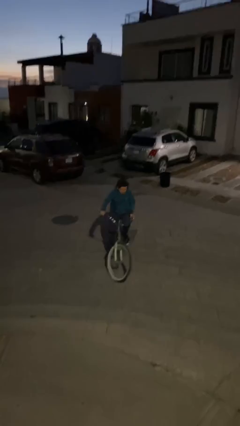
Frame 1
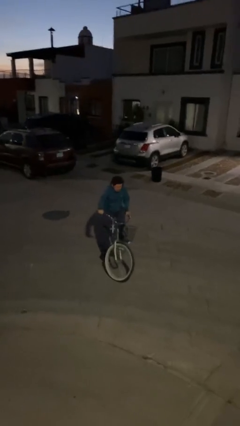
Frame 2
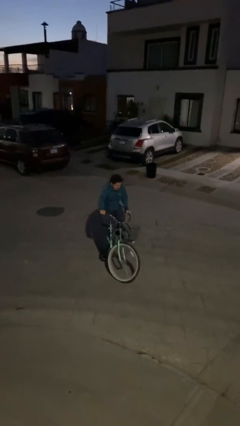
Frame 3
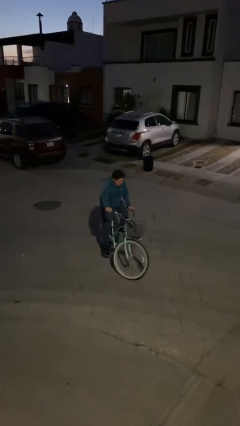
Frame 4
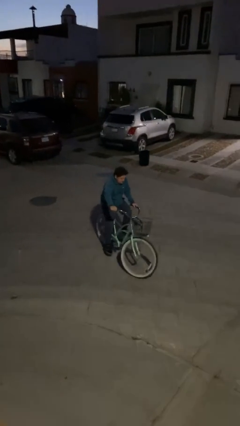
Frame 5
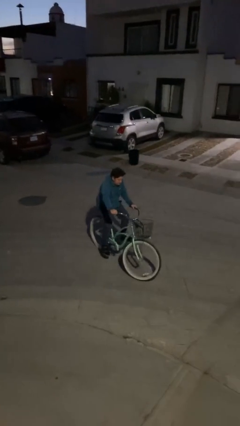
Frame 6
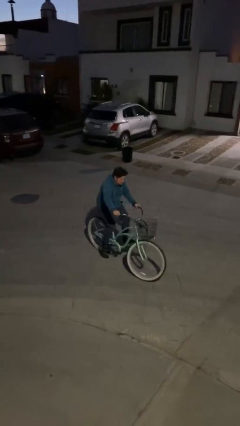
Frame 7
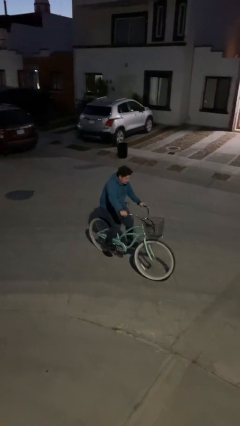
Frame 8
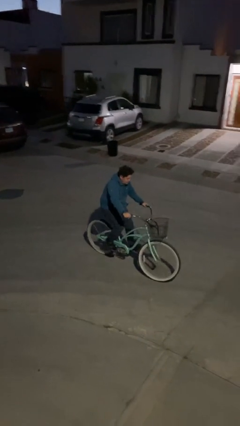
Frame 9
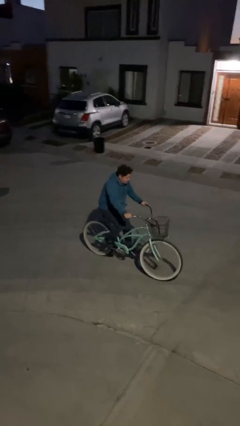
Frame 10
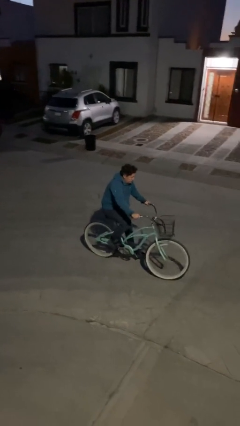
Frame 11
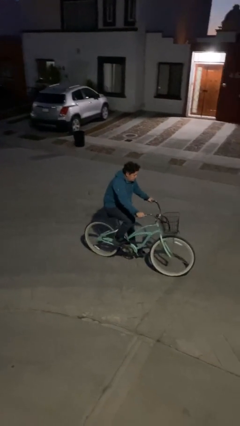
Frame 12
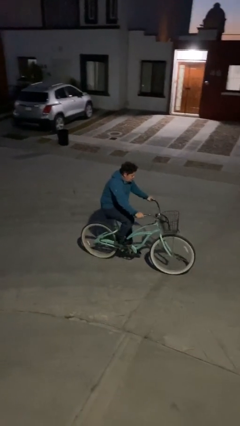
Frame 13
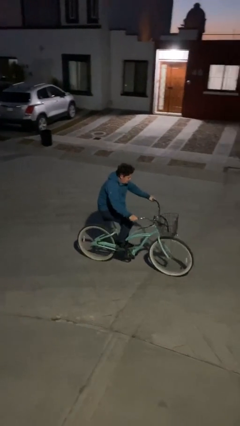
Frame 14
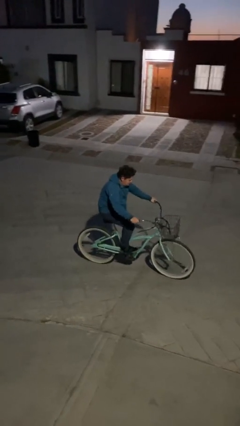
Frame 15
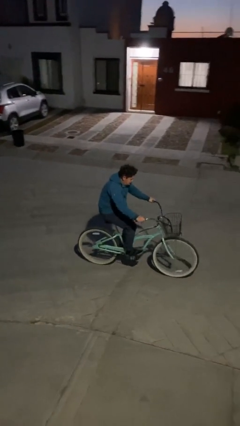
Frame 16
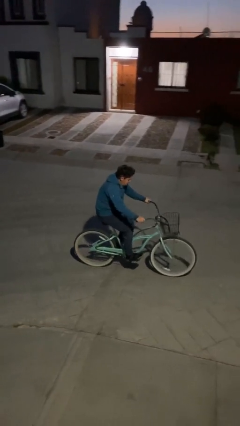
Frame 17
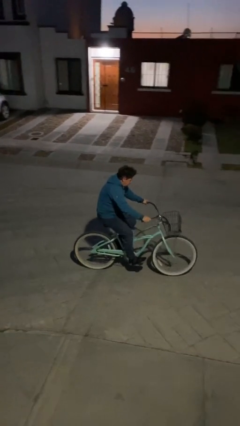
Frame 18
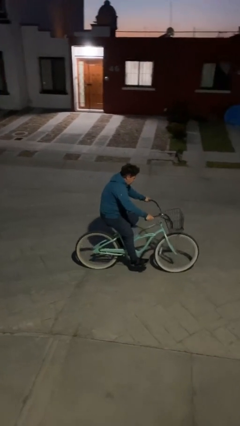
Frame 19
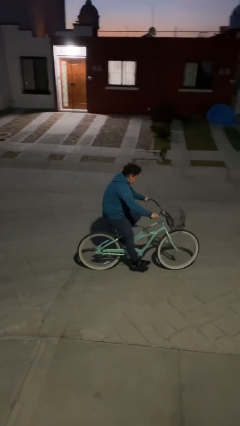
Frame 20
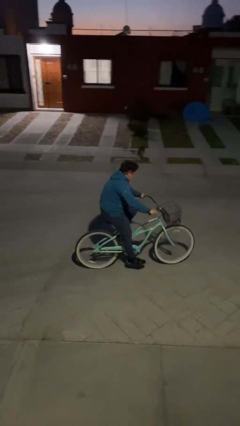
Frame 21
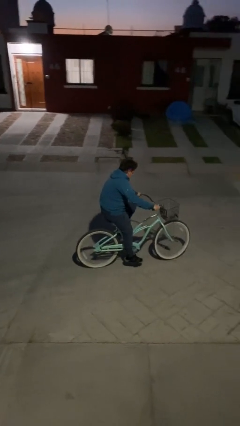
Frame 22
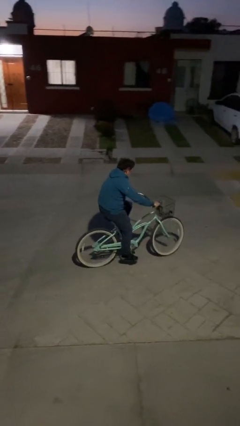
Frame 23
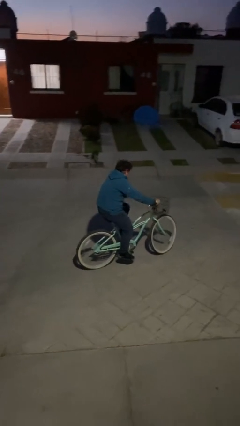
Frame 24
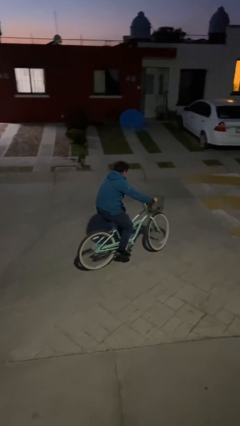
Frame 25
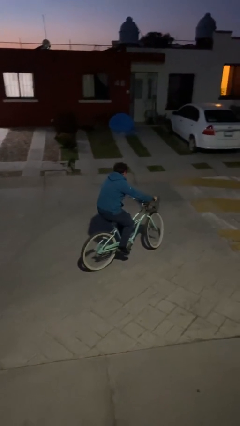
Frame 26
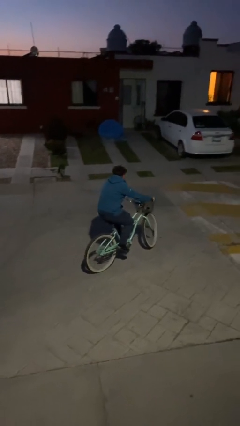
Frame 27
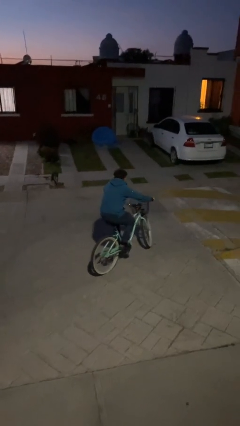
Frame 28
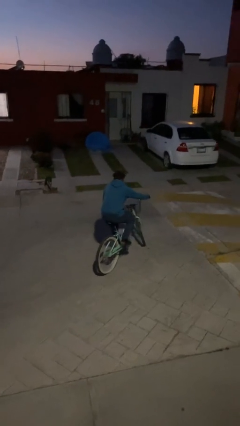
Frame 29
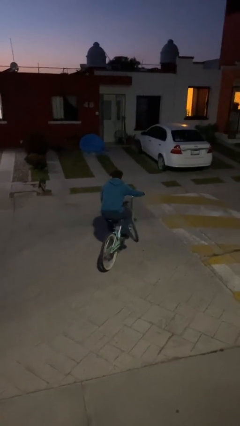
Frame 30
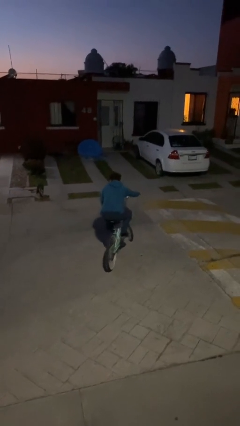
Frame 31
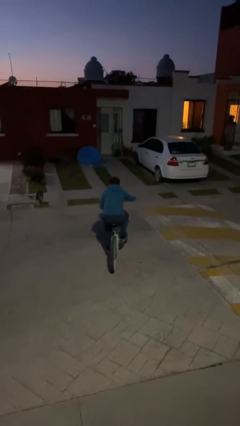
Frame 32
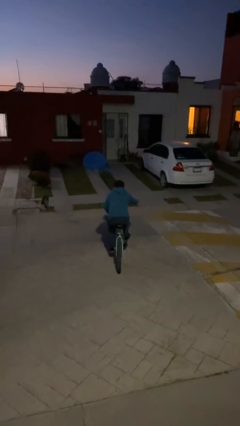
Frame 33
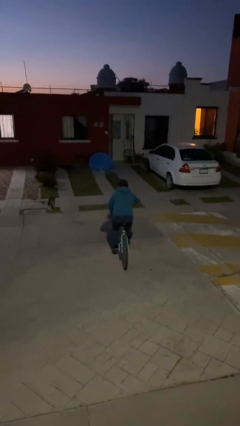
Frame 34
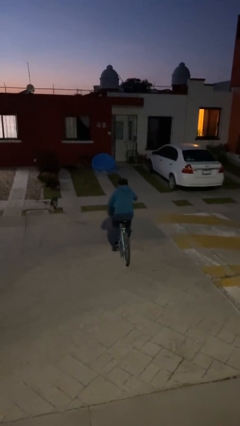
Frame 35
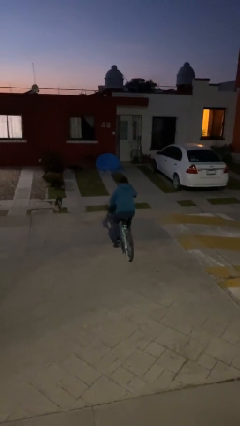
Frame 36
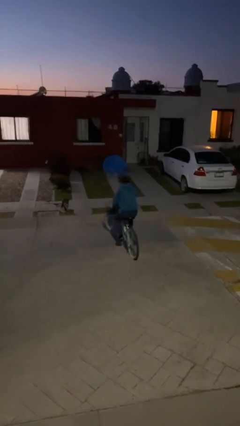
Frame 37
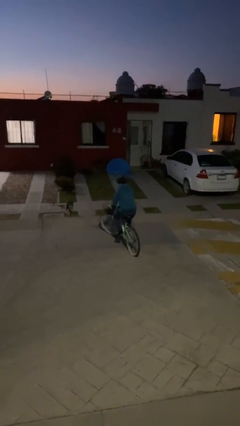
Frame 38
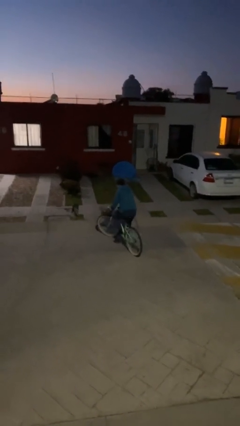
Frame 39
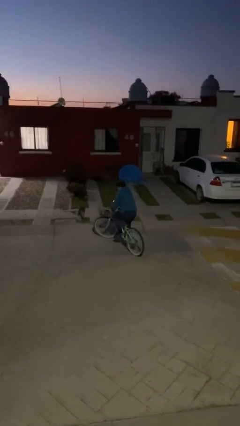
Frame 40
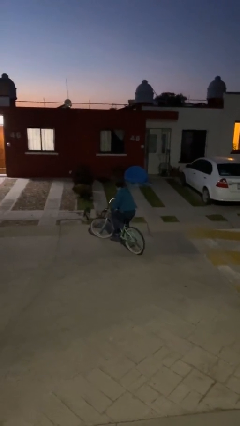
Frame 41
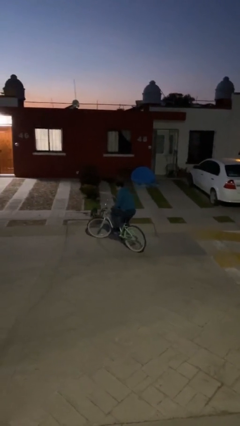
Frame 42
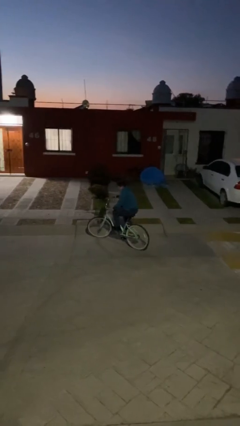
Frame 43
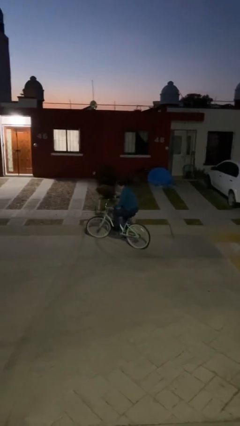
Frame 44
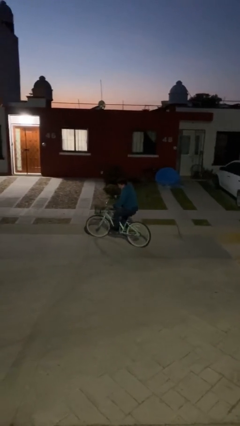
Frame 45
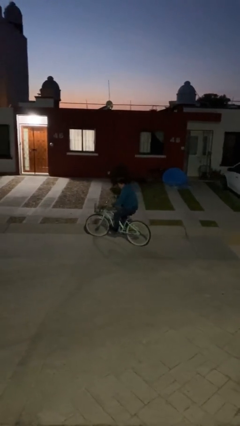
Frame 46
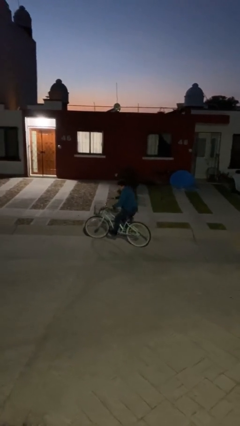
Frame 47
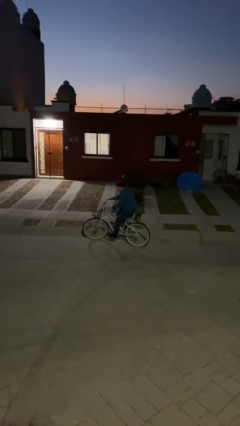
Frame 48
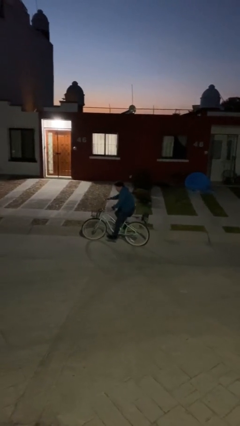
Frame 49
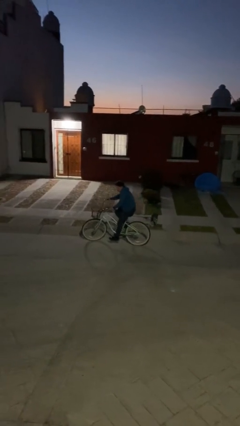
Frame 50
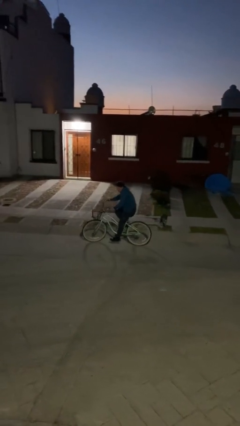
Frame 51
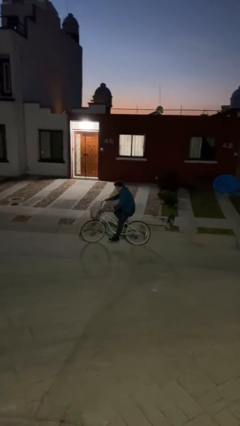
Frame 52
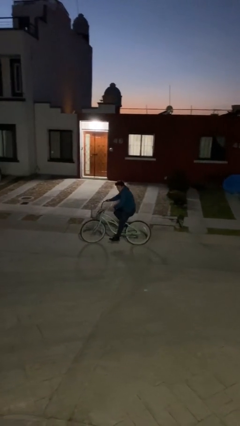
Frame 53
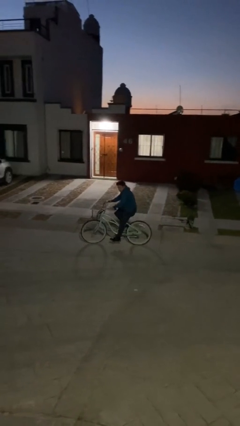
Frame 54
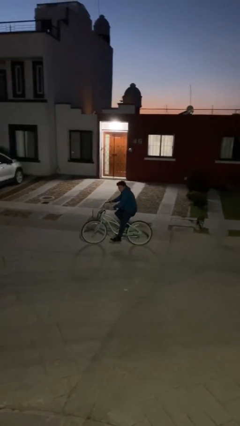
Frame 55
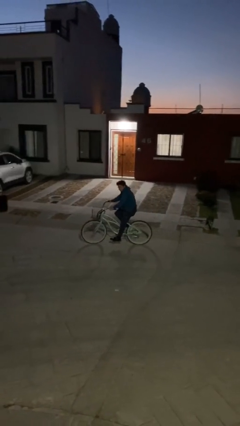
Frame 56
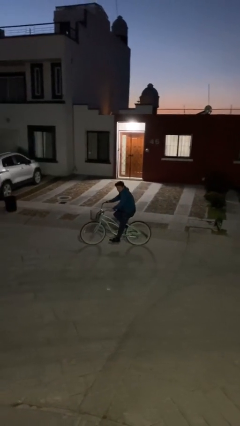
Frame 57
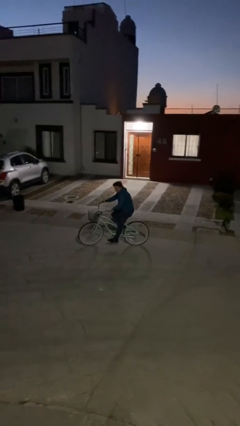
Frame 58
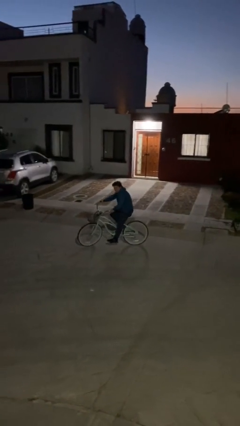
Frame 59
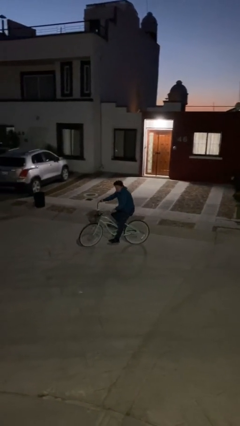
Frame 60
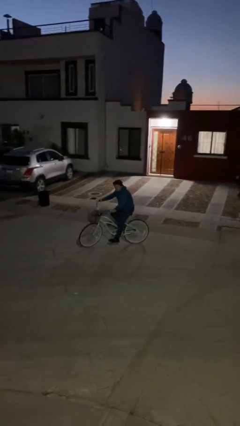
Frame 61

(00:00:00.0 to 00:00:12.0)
person rides bicycle

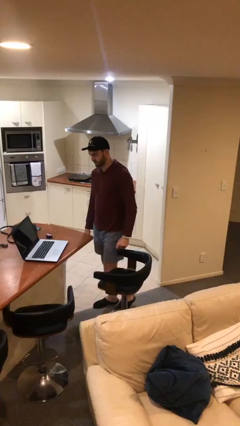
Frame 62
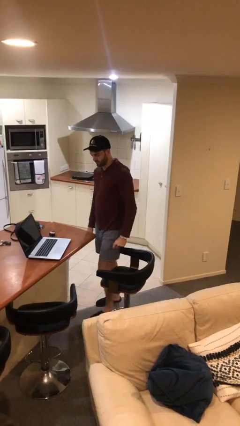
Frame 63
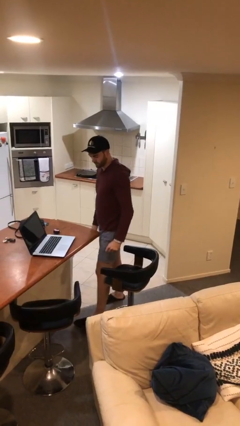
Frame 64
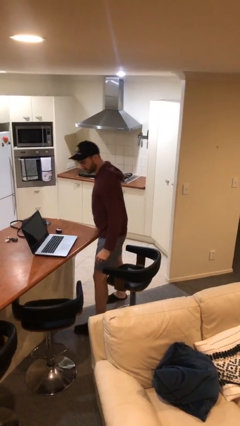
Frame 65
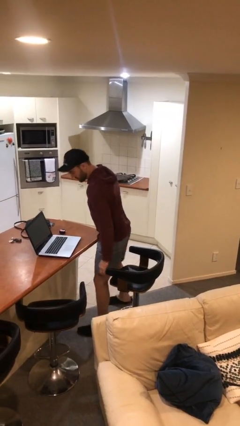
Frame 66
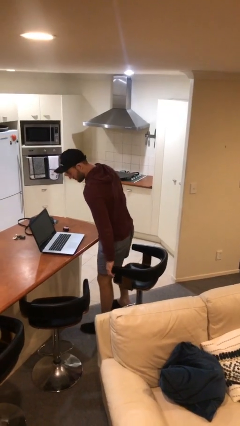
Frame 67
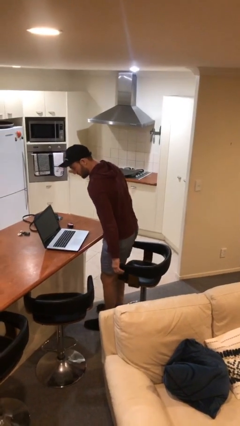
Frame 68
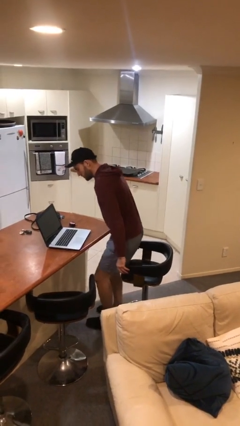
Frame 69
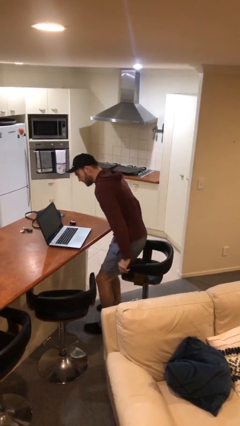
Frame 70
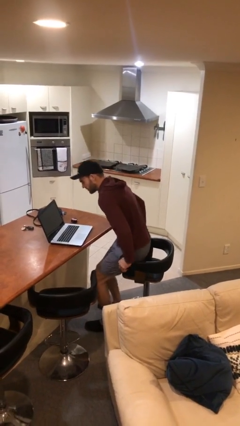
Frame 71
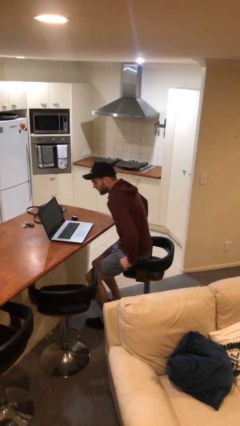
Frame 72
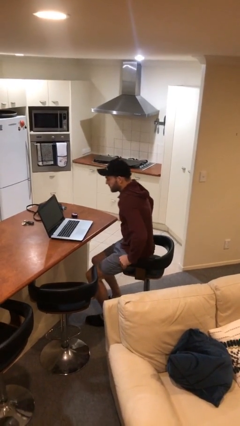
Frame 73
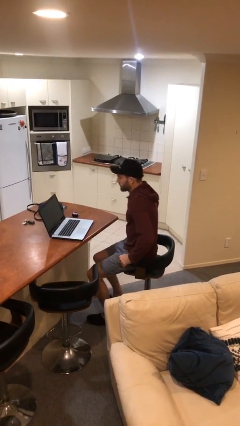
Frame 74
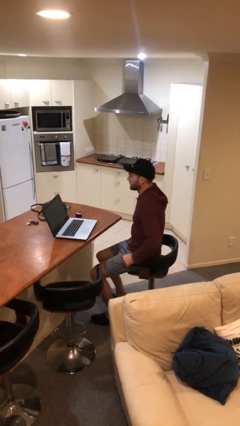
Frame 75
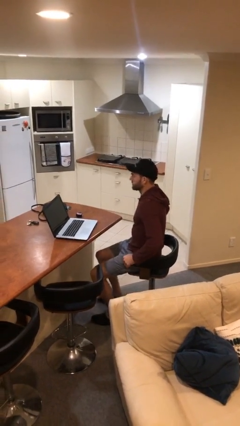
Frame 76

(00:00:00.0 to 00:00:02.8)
person sits down

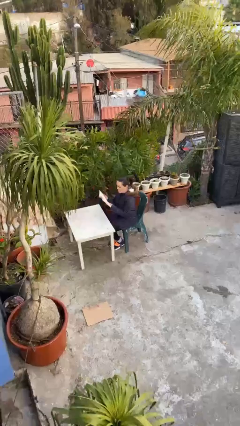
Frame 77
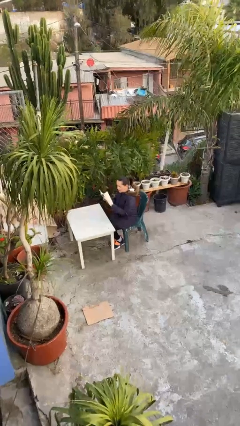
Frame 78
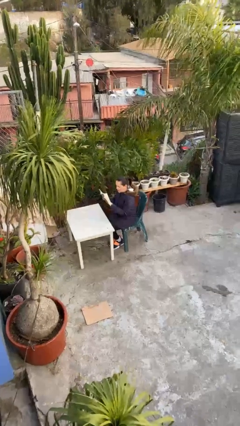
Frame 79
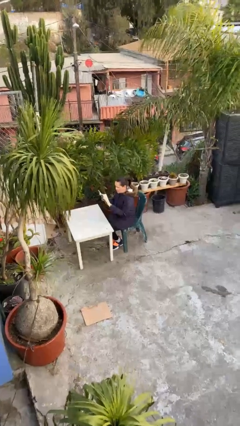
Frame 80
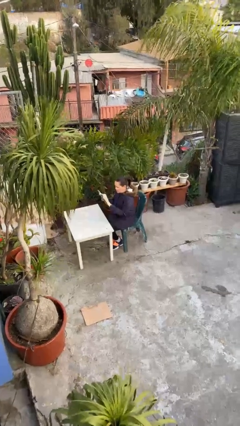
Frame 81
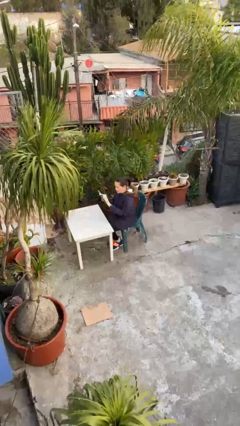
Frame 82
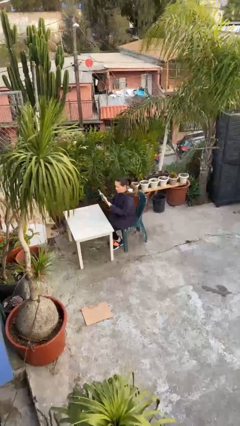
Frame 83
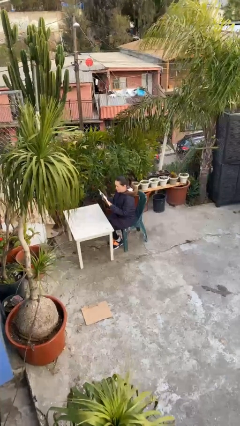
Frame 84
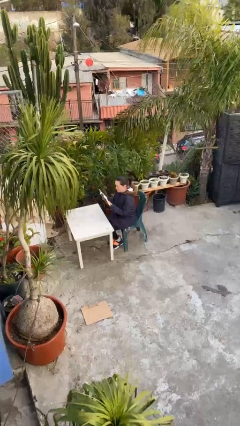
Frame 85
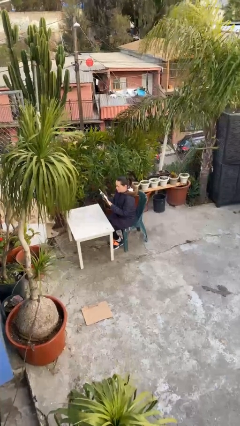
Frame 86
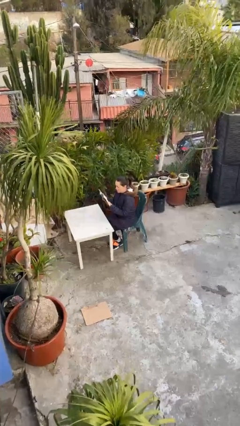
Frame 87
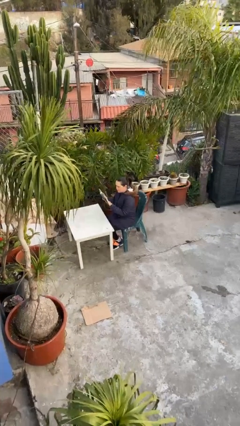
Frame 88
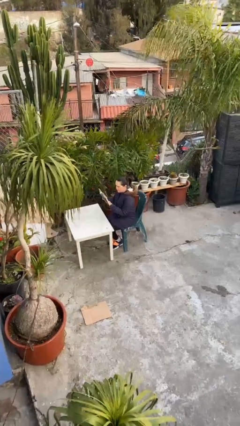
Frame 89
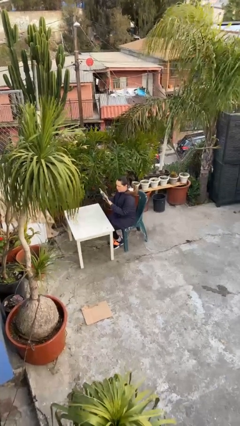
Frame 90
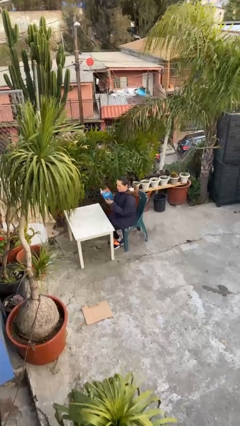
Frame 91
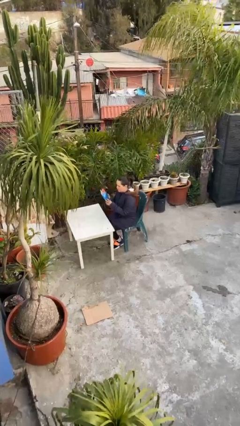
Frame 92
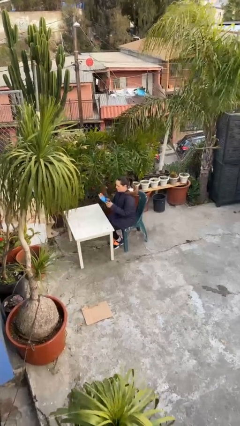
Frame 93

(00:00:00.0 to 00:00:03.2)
person reads document
